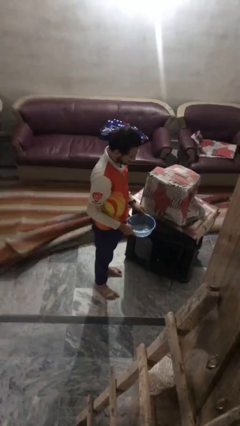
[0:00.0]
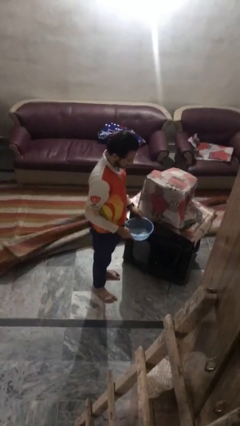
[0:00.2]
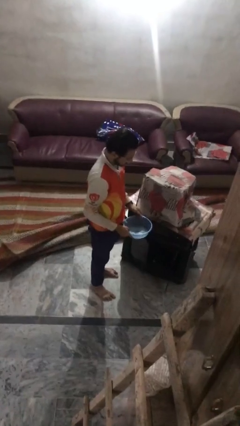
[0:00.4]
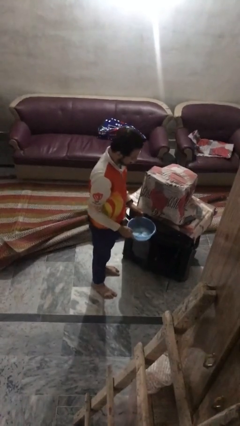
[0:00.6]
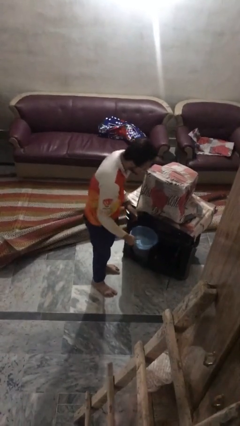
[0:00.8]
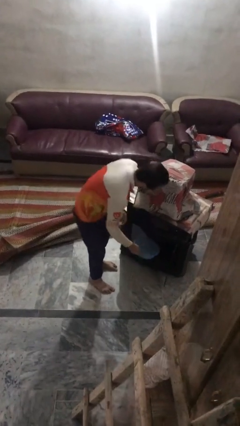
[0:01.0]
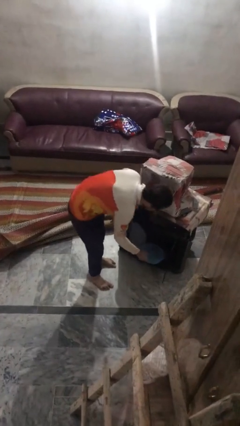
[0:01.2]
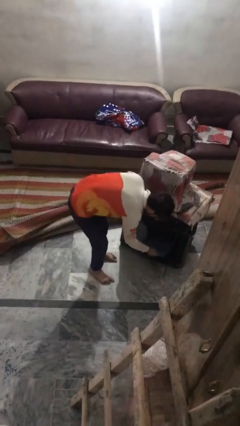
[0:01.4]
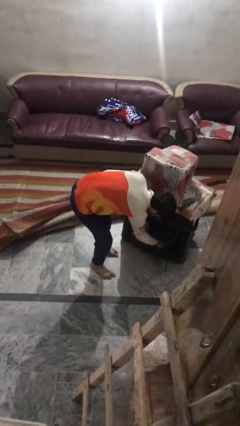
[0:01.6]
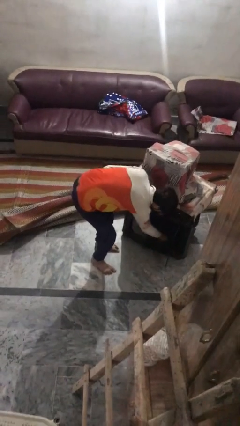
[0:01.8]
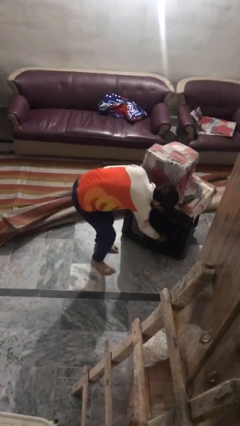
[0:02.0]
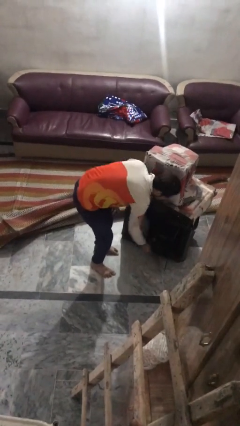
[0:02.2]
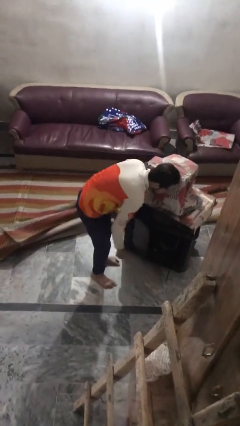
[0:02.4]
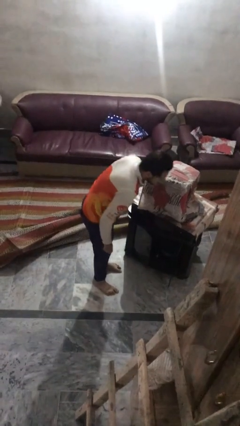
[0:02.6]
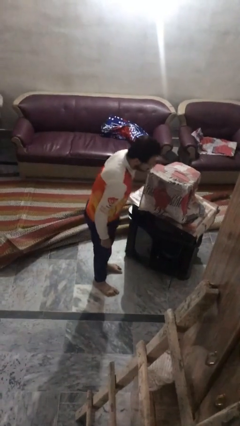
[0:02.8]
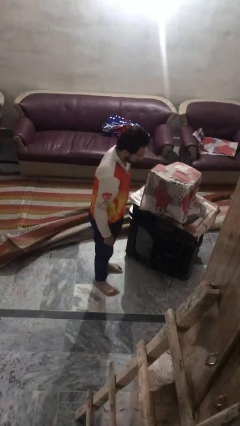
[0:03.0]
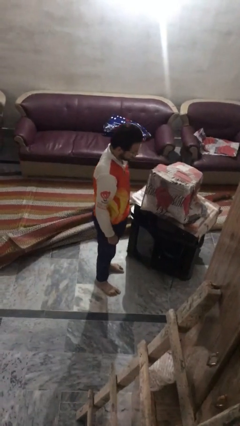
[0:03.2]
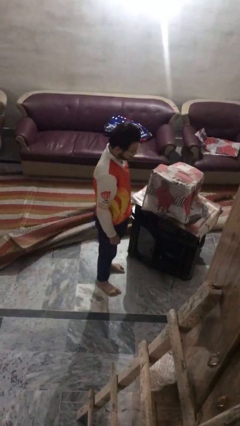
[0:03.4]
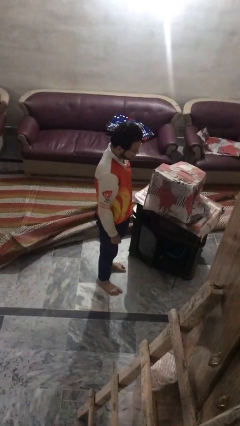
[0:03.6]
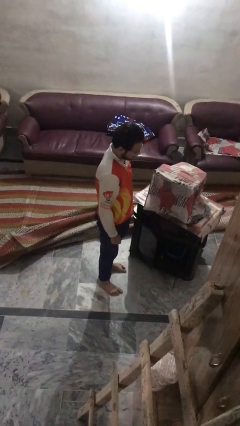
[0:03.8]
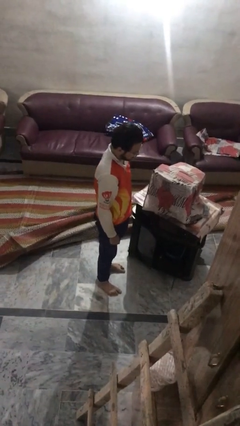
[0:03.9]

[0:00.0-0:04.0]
person puts down object into cabinet

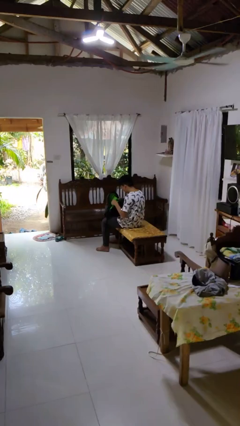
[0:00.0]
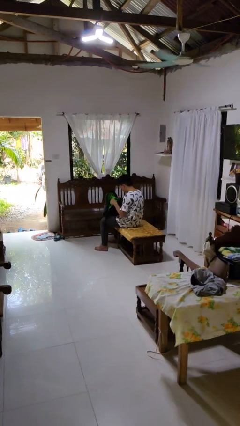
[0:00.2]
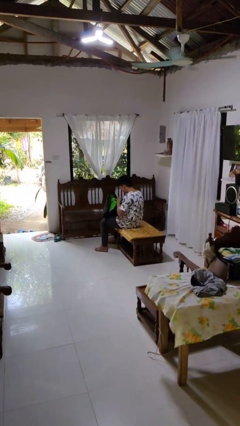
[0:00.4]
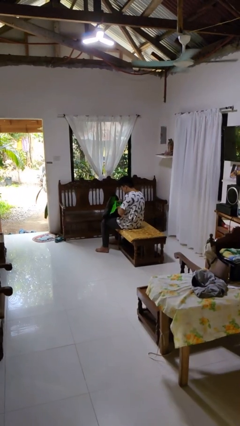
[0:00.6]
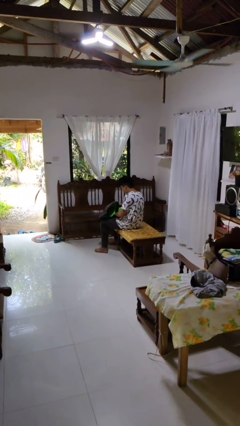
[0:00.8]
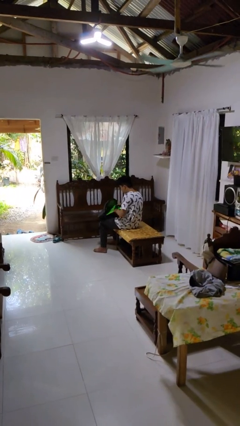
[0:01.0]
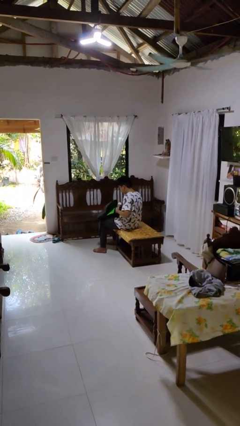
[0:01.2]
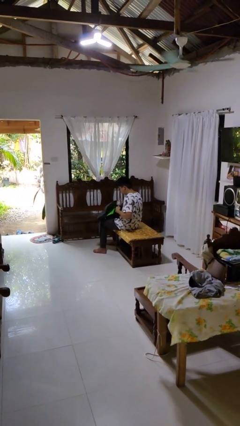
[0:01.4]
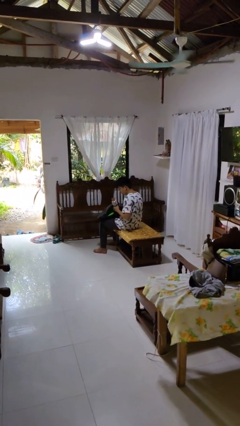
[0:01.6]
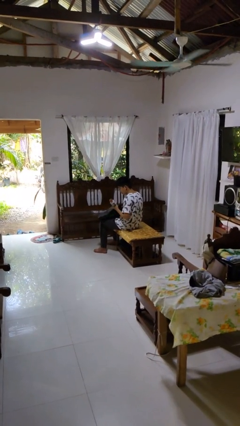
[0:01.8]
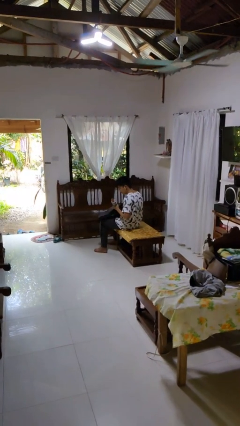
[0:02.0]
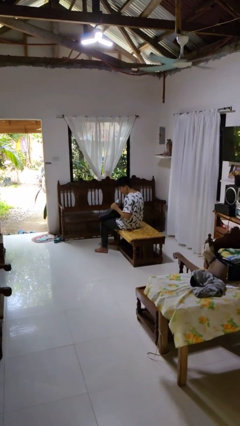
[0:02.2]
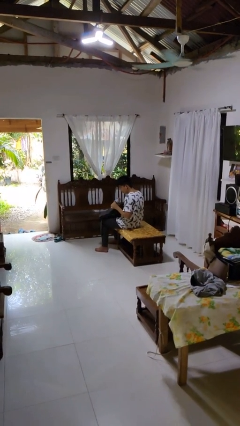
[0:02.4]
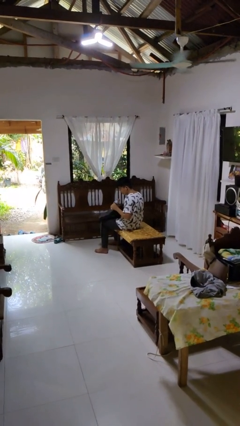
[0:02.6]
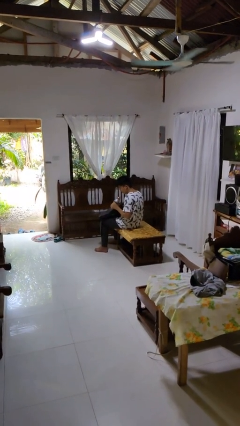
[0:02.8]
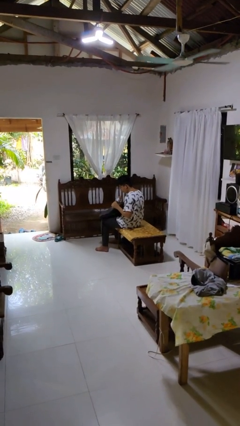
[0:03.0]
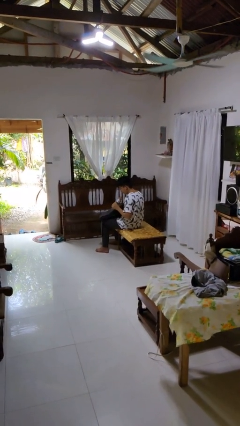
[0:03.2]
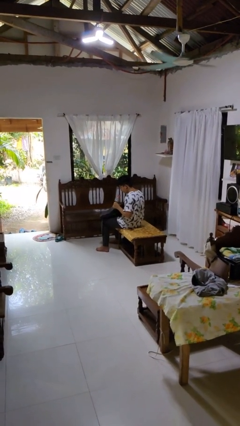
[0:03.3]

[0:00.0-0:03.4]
person takes object from backpack

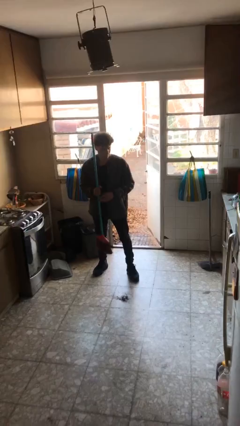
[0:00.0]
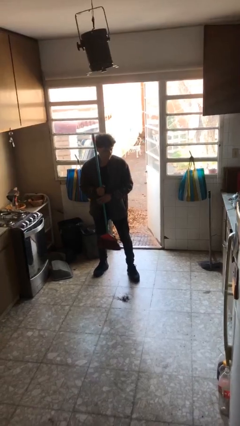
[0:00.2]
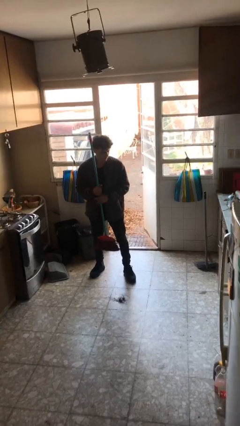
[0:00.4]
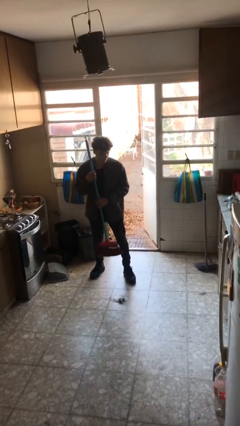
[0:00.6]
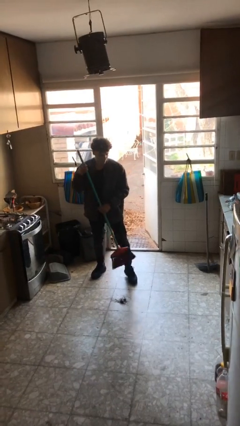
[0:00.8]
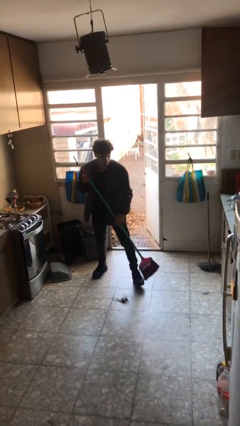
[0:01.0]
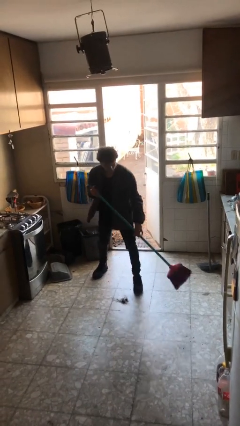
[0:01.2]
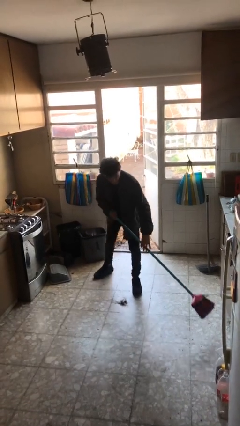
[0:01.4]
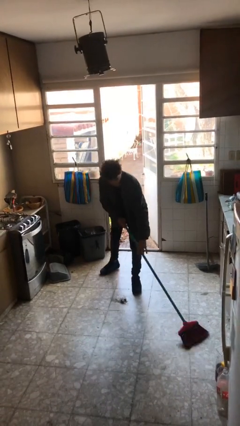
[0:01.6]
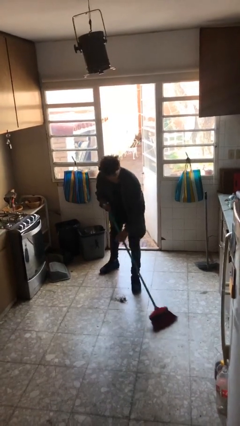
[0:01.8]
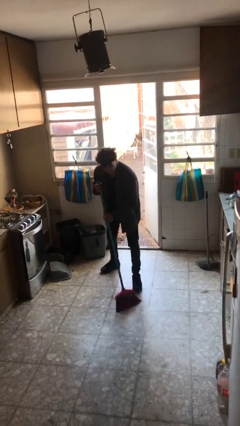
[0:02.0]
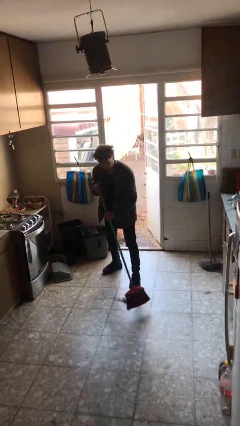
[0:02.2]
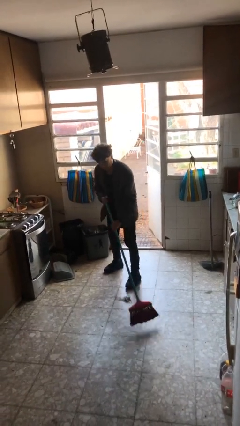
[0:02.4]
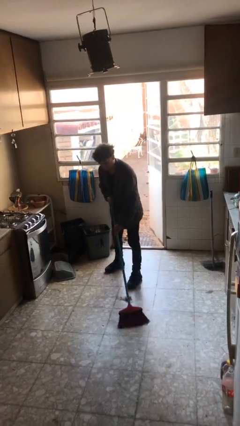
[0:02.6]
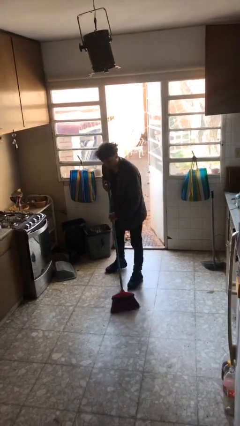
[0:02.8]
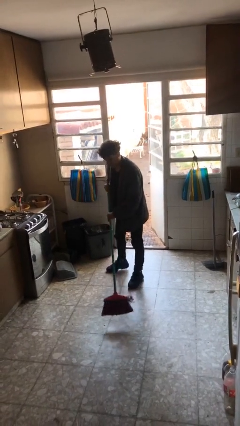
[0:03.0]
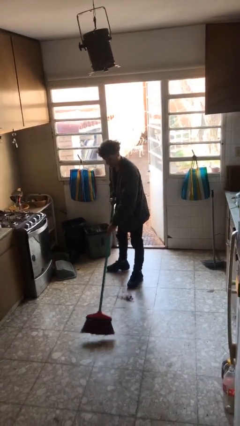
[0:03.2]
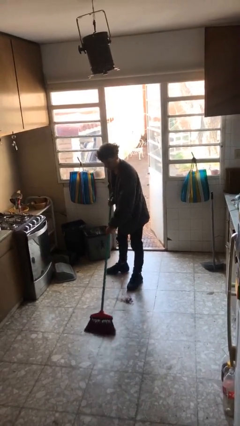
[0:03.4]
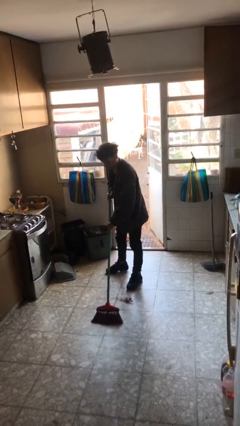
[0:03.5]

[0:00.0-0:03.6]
person sweeps floor

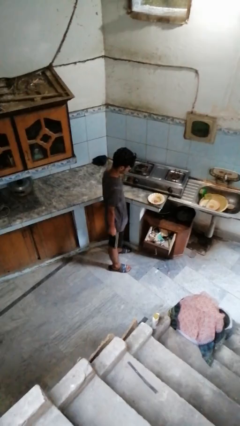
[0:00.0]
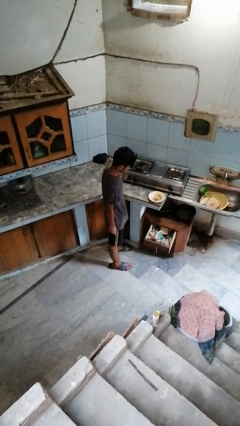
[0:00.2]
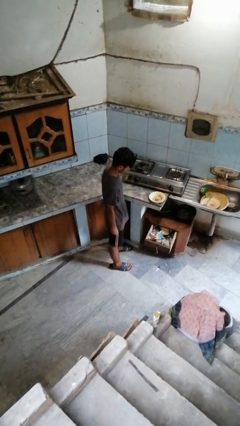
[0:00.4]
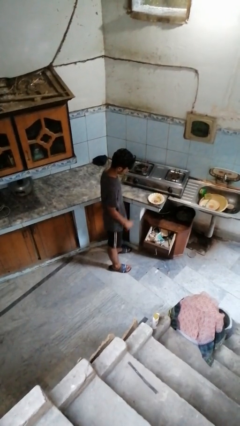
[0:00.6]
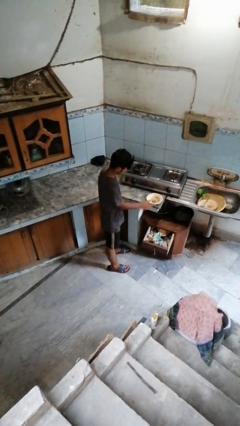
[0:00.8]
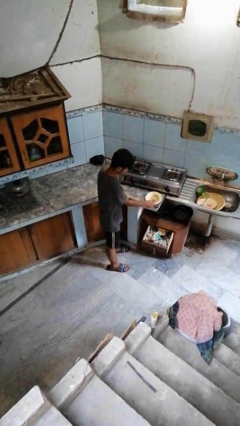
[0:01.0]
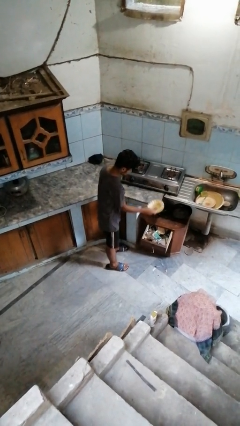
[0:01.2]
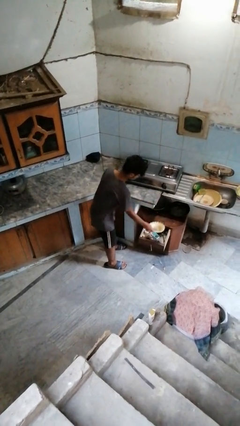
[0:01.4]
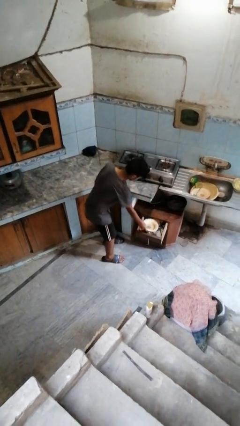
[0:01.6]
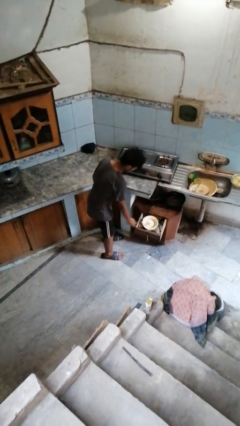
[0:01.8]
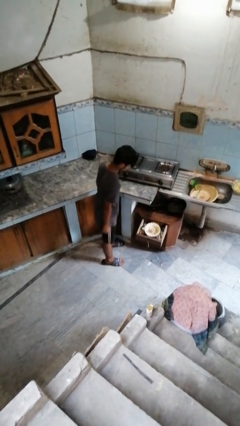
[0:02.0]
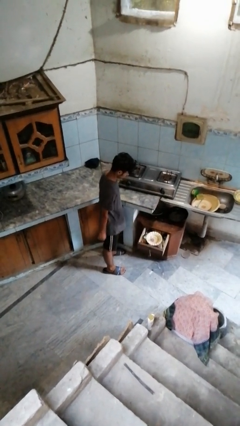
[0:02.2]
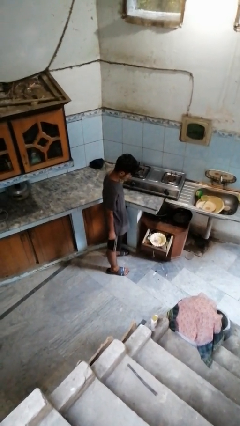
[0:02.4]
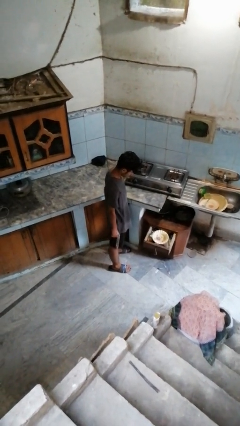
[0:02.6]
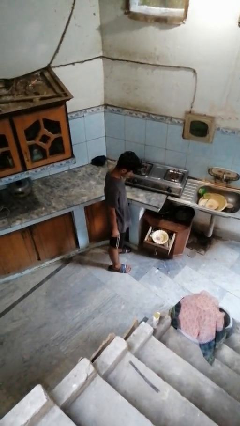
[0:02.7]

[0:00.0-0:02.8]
person puts object into kitchen drawer

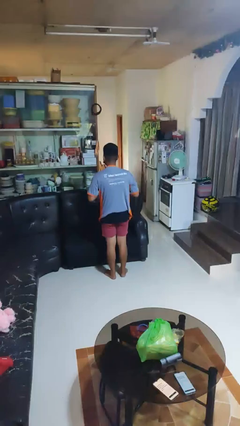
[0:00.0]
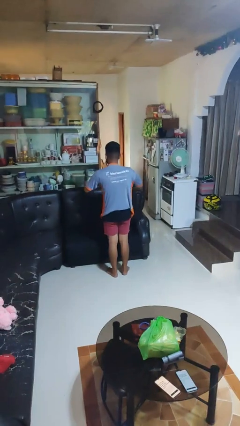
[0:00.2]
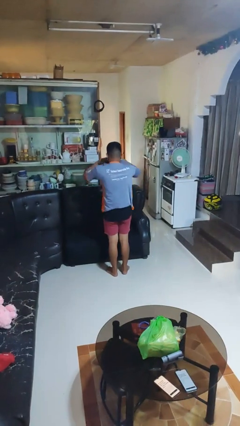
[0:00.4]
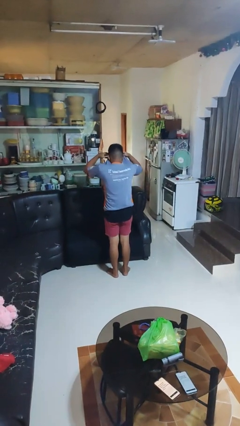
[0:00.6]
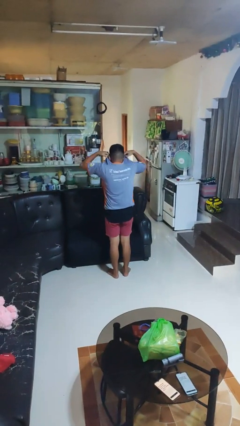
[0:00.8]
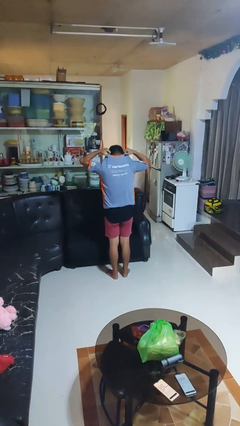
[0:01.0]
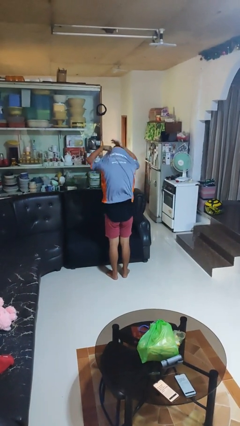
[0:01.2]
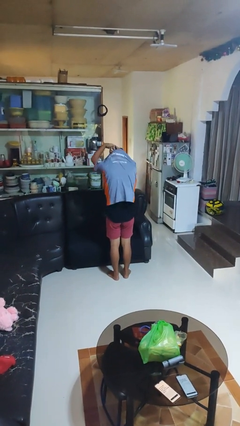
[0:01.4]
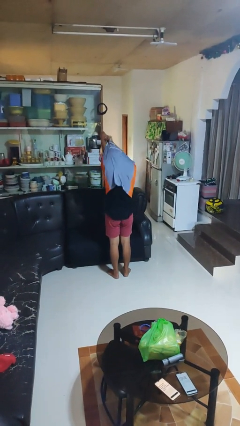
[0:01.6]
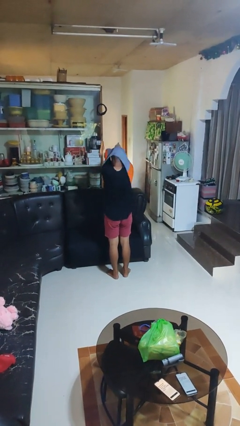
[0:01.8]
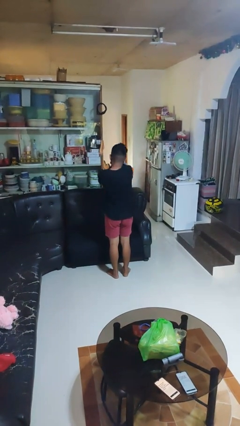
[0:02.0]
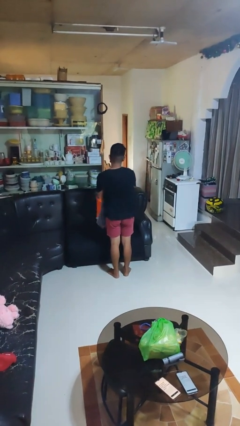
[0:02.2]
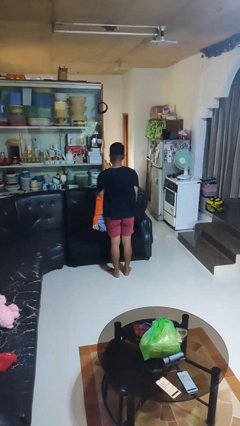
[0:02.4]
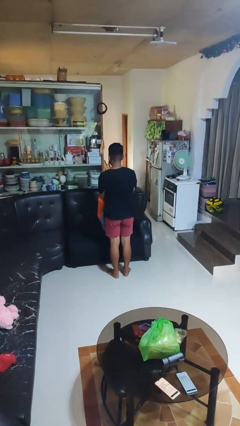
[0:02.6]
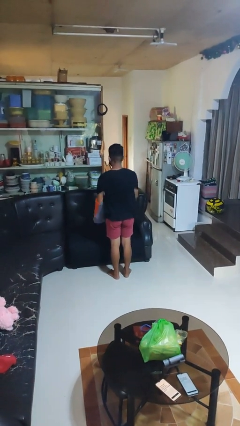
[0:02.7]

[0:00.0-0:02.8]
person takes off shirt

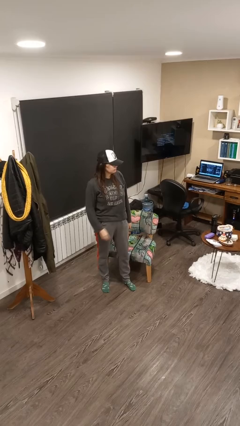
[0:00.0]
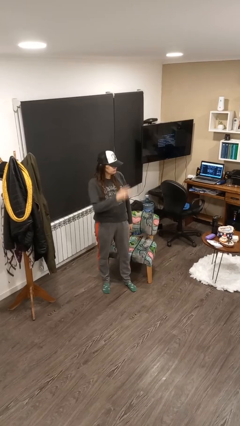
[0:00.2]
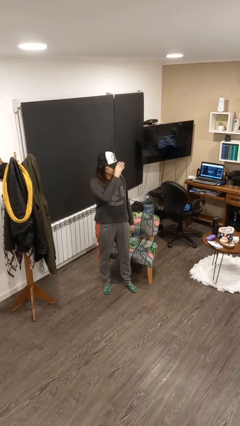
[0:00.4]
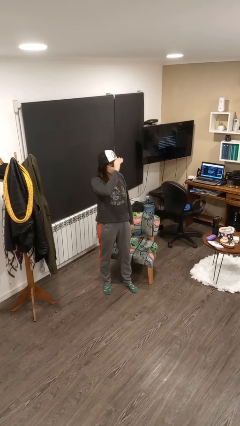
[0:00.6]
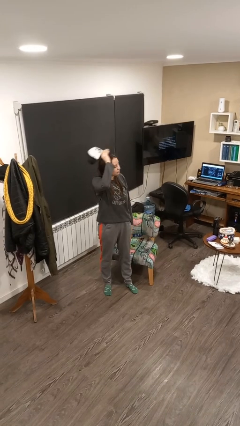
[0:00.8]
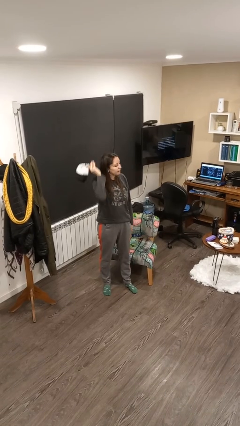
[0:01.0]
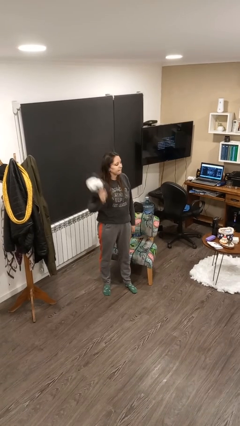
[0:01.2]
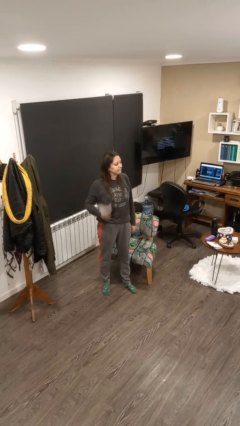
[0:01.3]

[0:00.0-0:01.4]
person takes off hat
